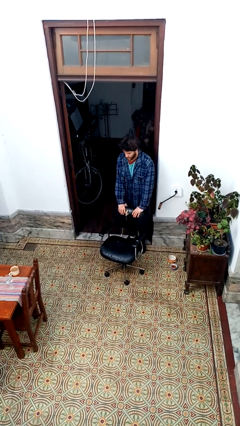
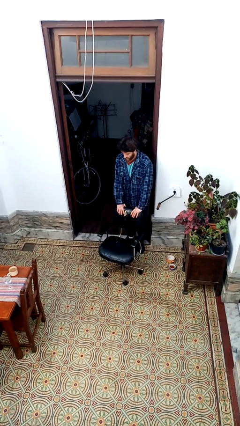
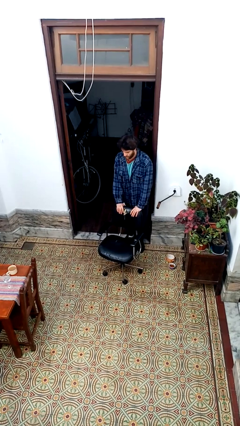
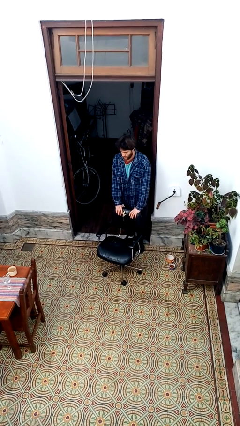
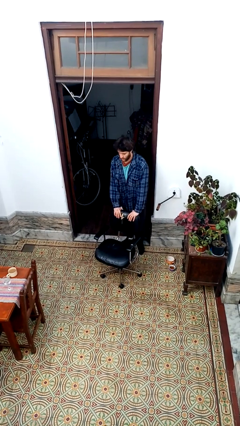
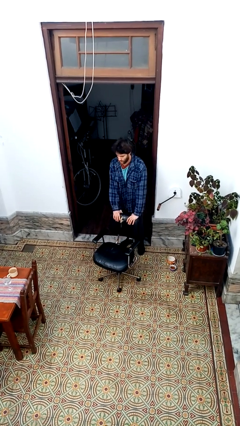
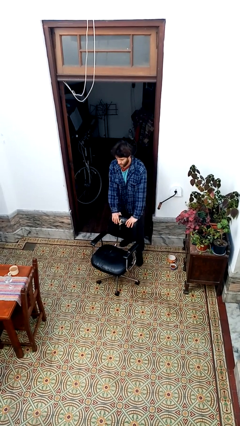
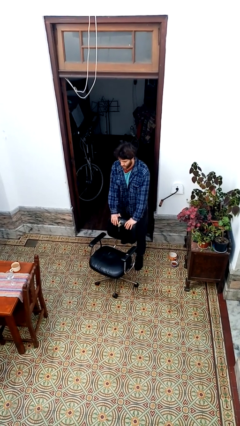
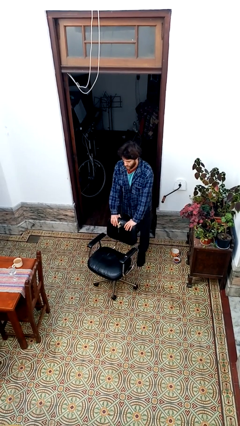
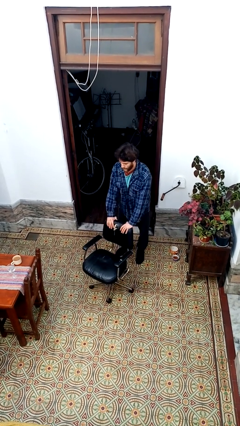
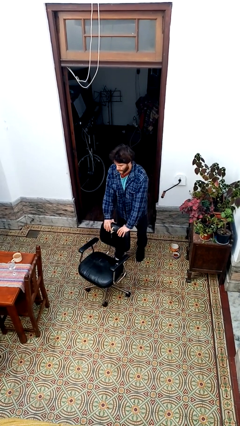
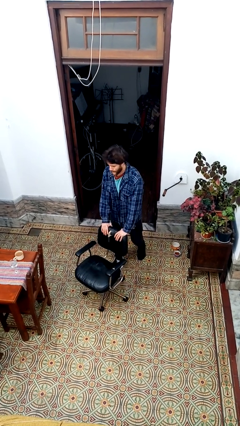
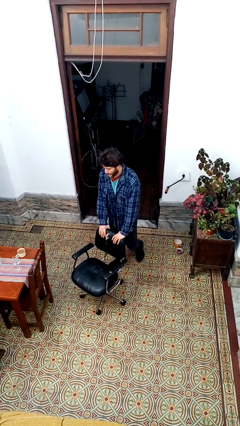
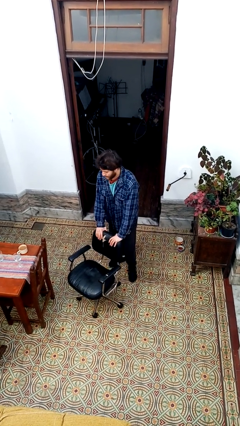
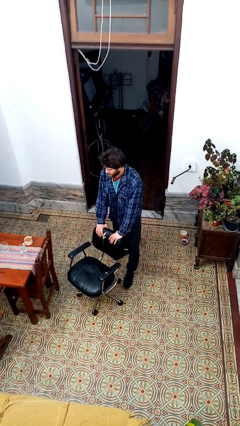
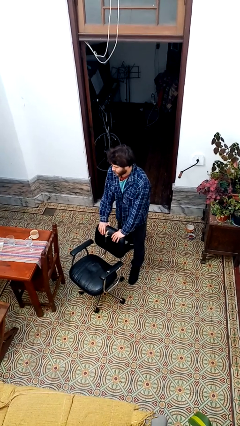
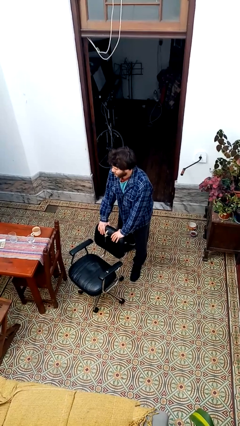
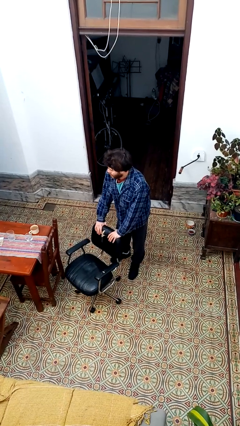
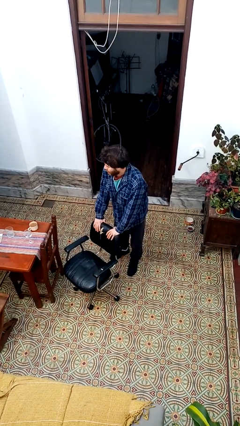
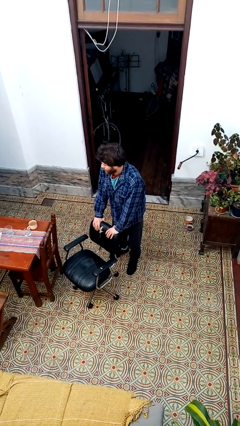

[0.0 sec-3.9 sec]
person pushes wheeled cart

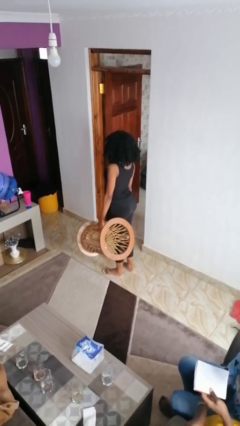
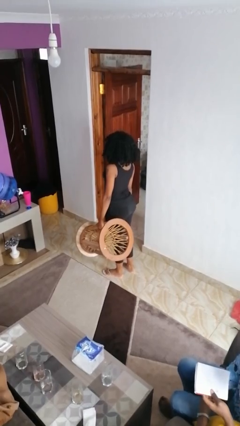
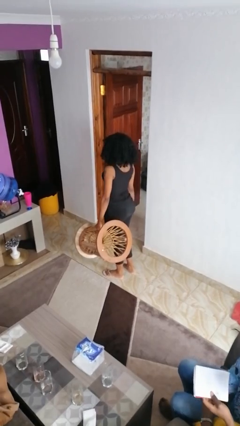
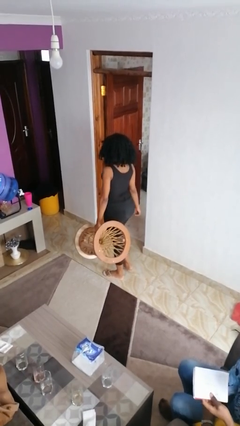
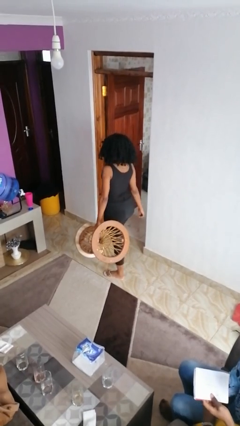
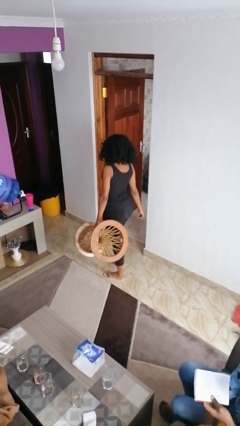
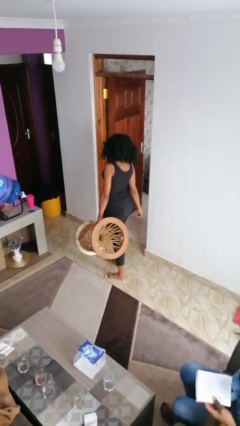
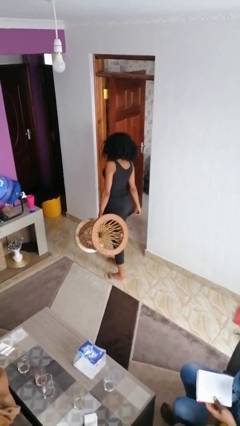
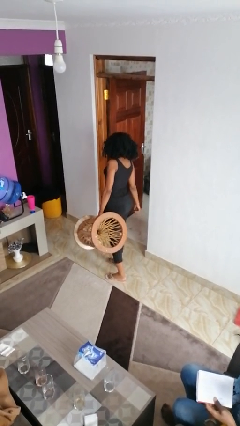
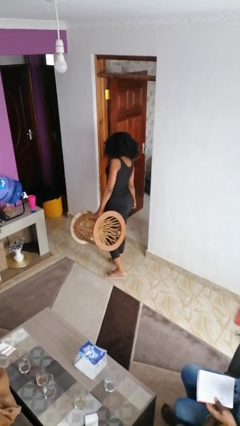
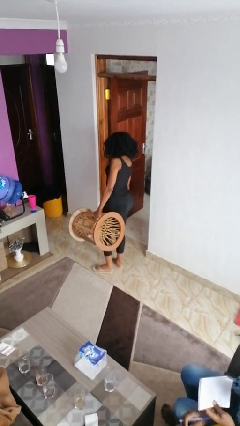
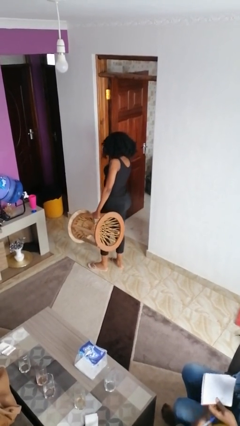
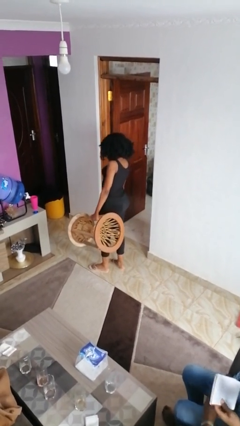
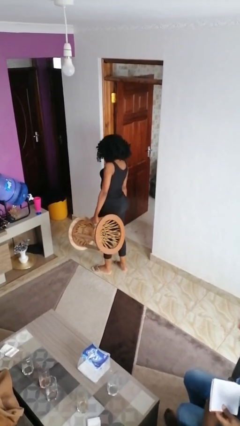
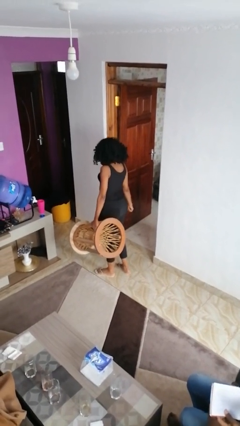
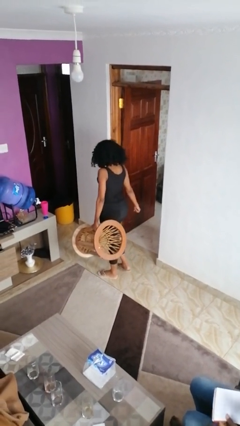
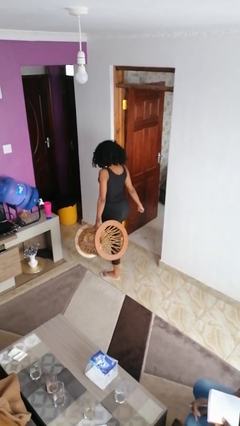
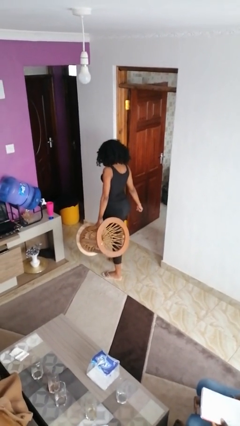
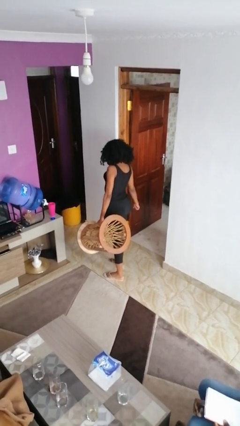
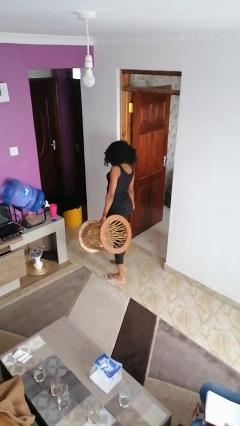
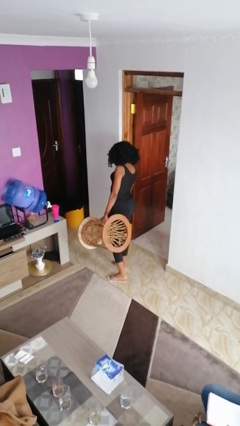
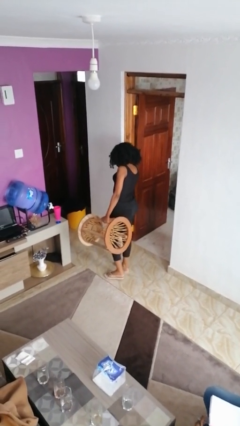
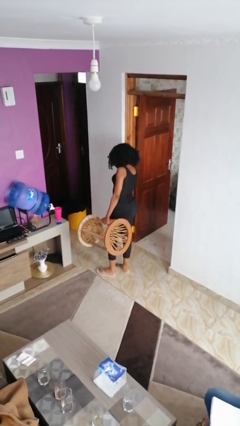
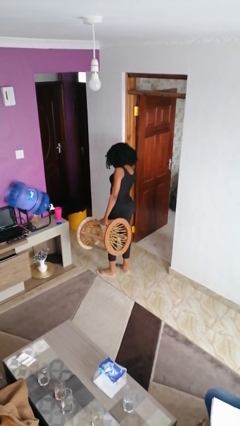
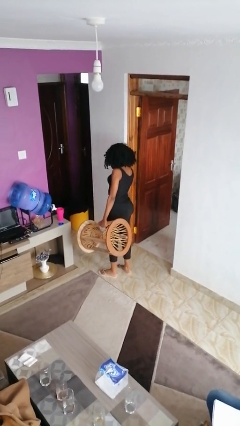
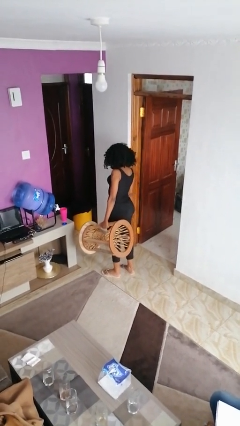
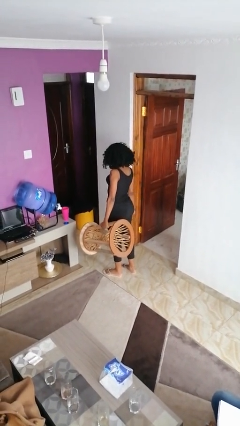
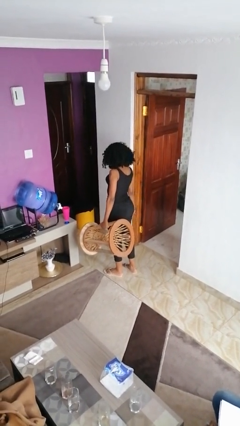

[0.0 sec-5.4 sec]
person carries furniture

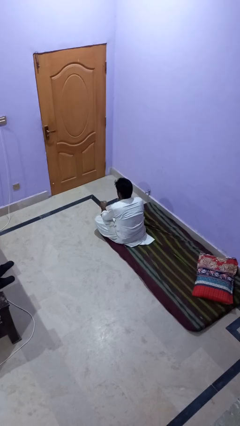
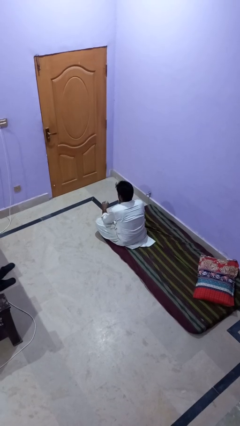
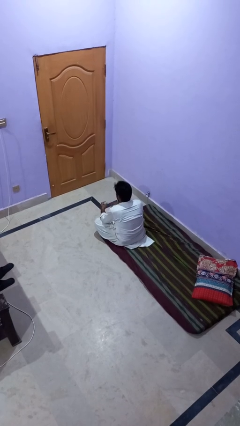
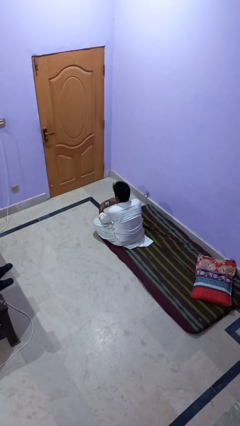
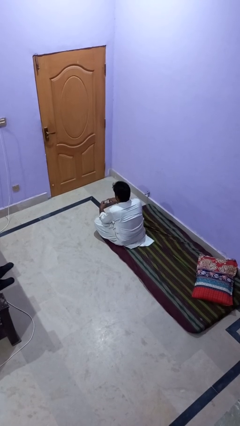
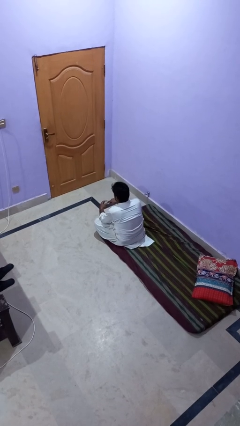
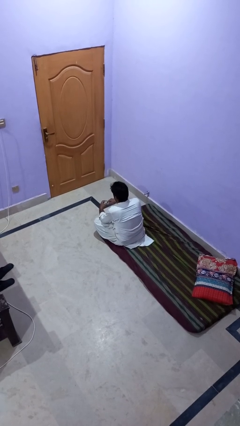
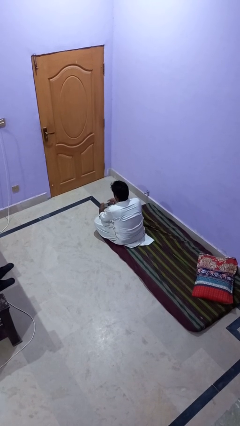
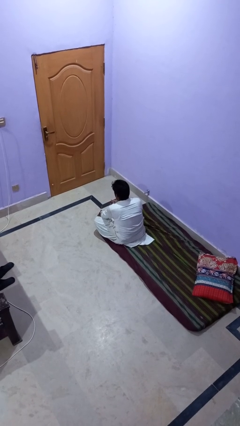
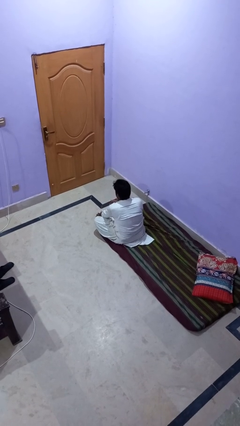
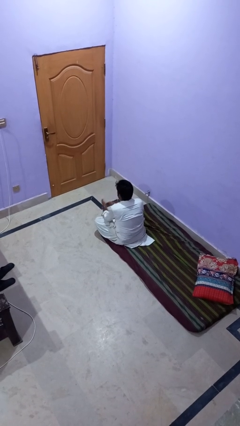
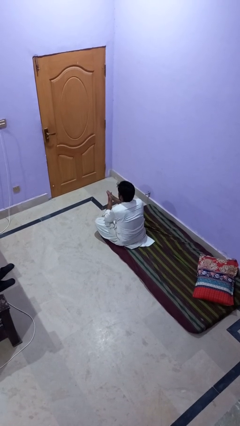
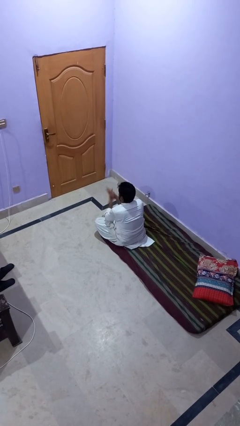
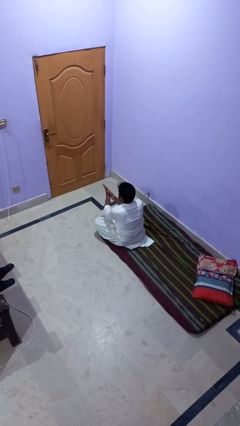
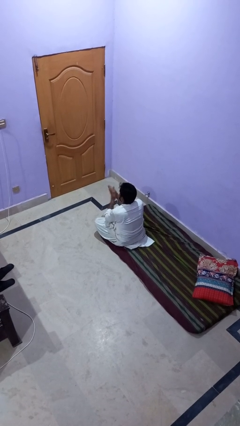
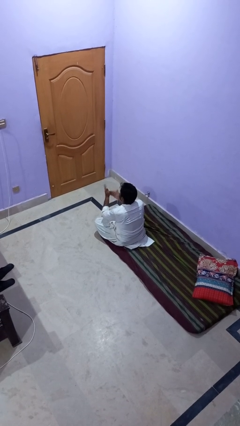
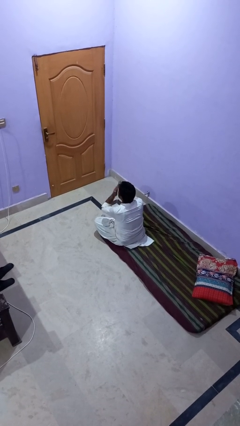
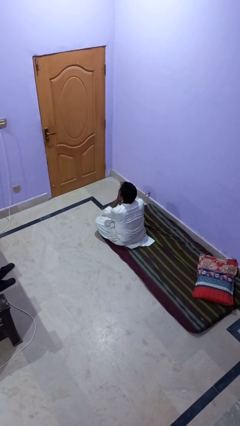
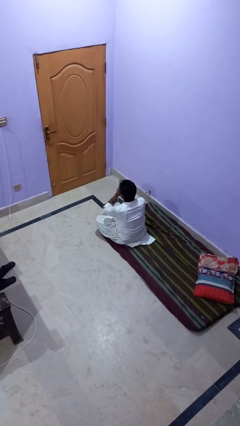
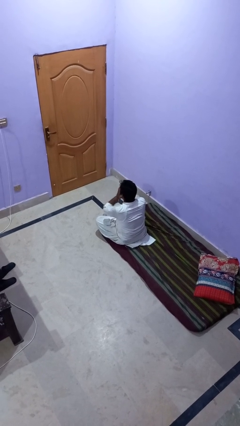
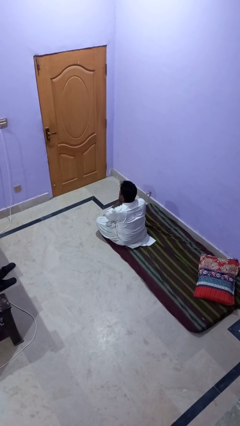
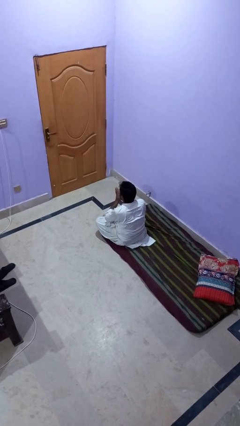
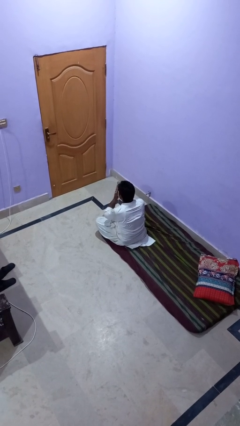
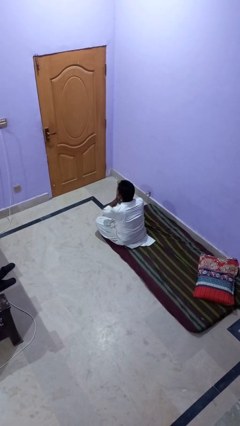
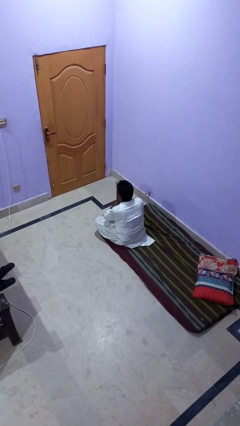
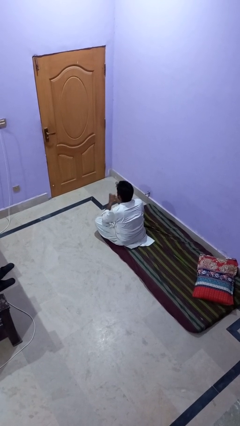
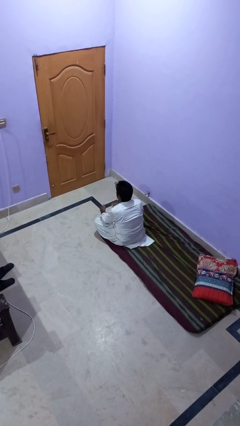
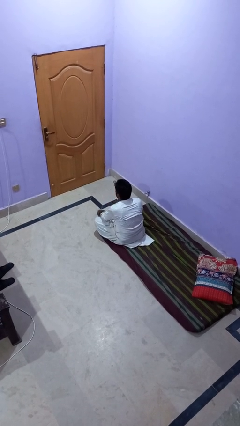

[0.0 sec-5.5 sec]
person applies sunscreen

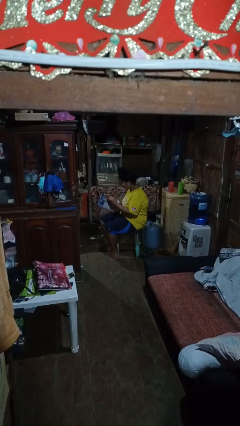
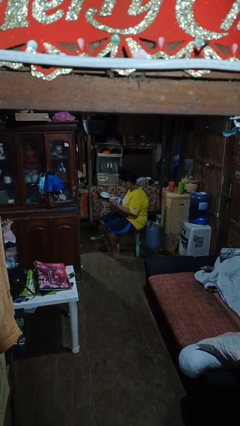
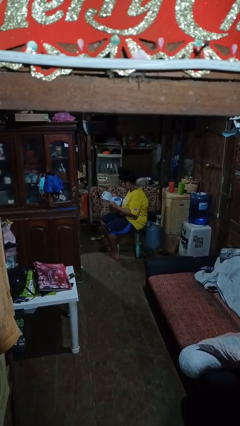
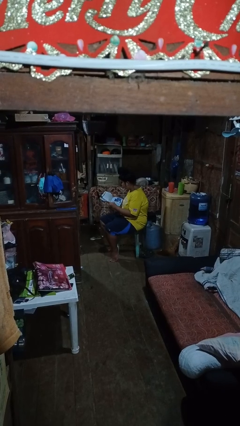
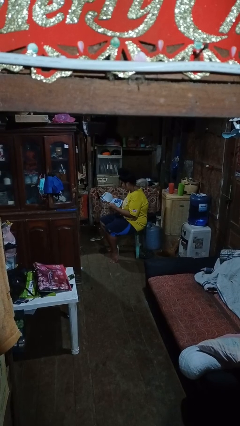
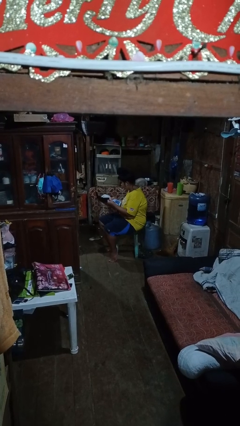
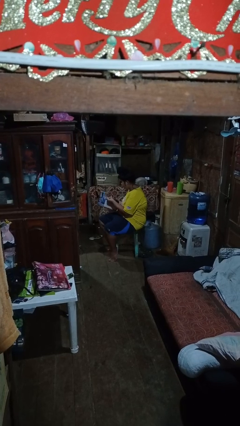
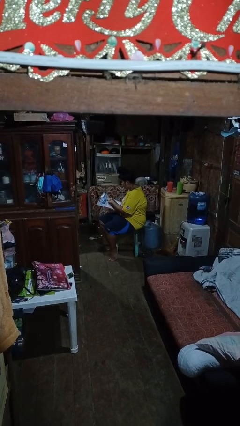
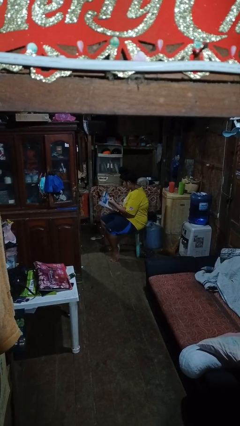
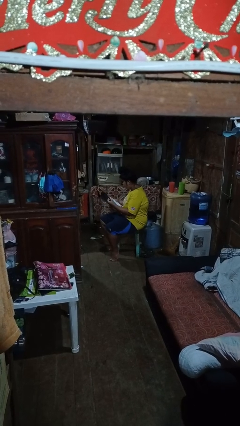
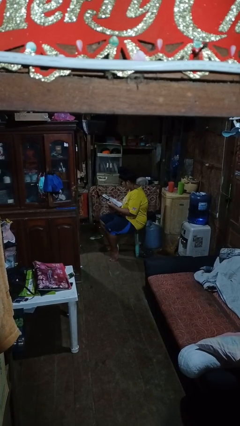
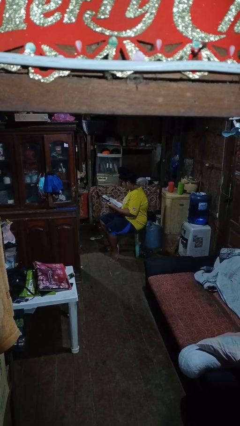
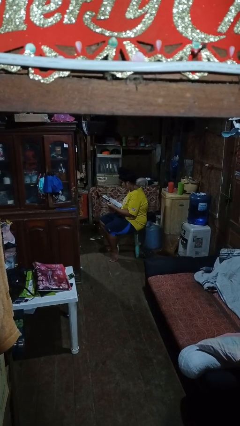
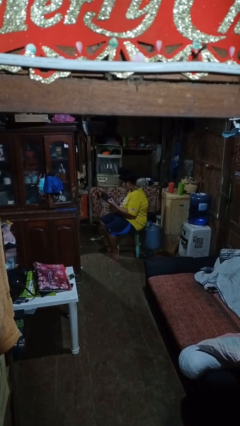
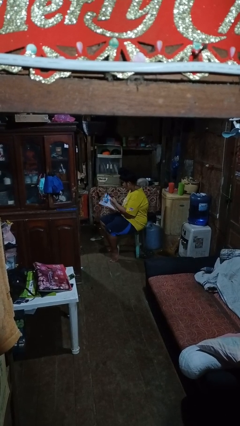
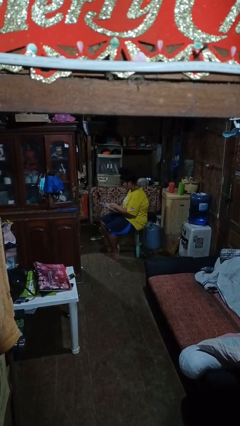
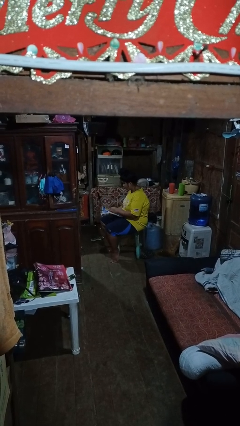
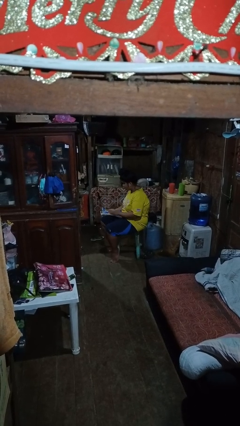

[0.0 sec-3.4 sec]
person reads magazine
